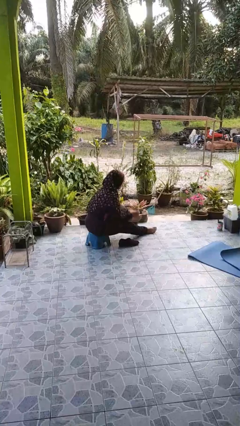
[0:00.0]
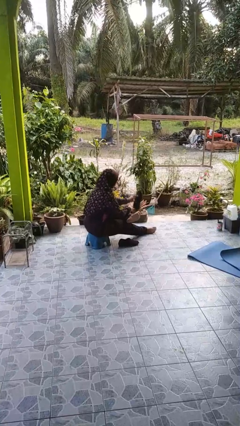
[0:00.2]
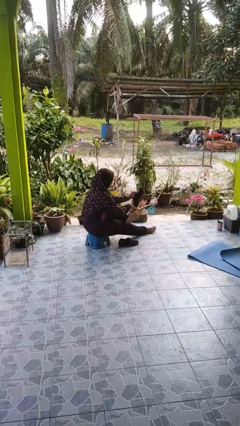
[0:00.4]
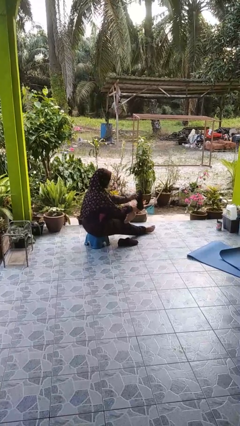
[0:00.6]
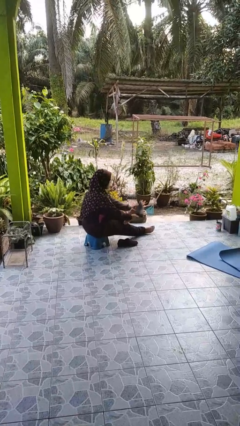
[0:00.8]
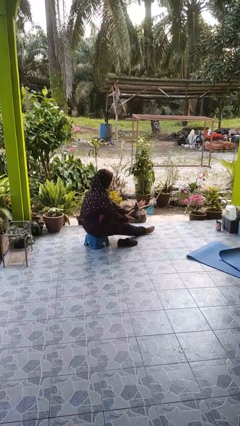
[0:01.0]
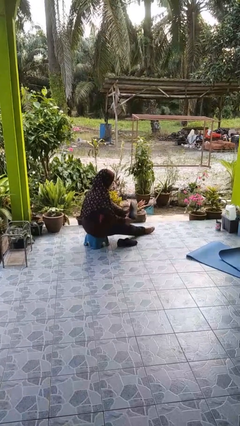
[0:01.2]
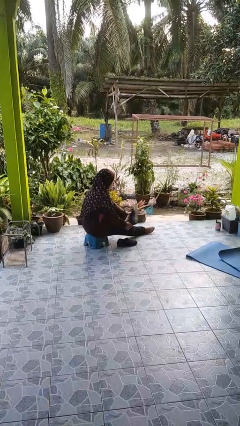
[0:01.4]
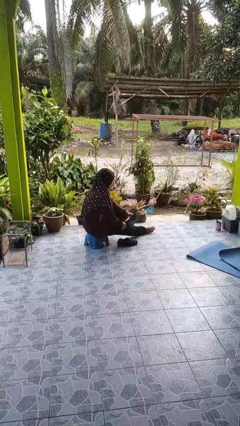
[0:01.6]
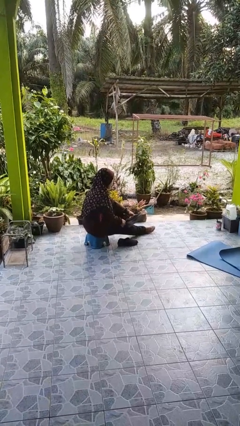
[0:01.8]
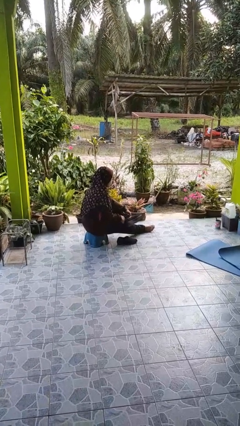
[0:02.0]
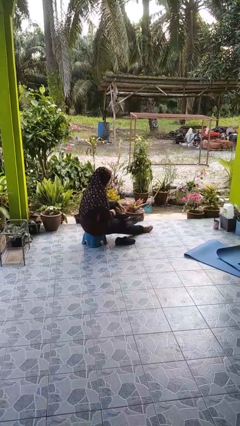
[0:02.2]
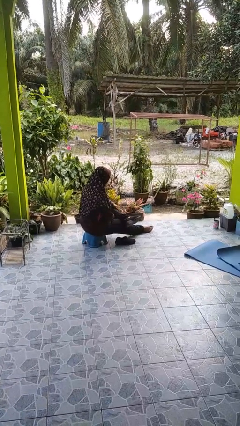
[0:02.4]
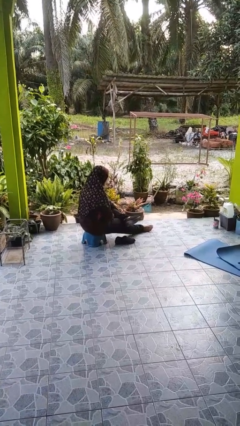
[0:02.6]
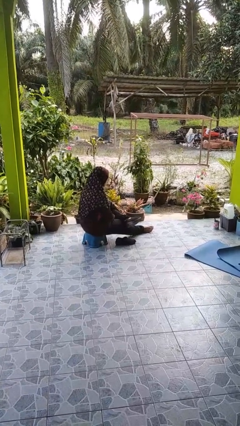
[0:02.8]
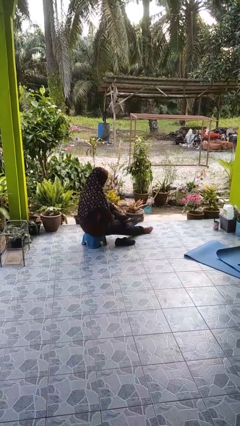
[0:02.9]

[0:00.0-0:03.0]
person puts on shoes

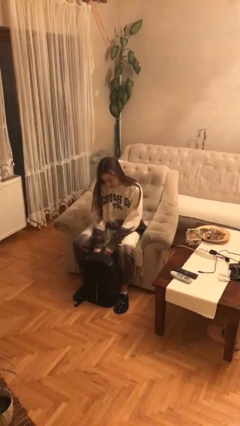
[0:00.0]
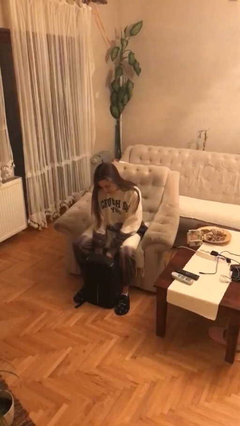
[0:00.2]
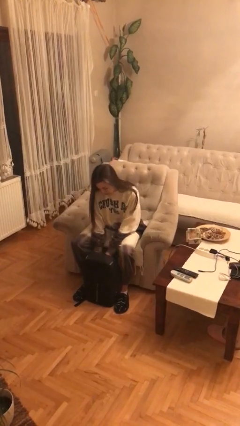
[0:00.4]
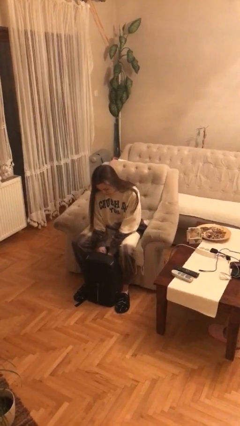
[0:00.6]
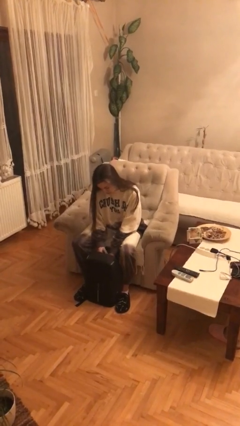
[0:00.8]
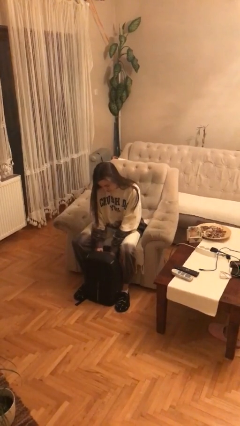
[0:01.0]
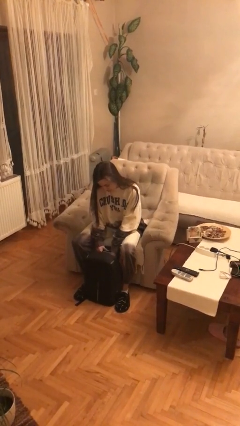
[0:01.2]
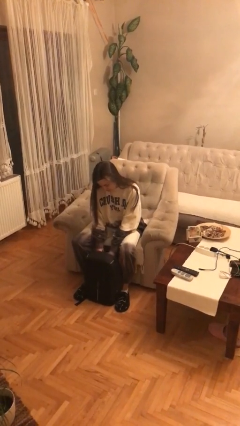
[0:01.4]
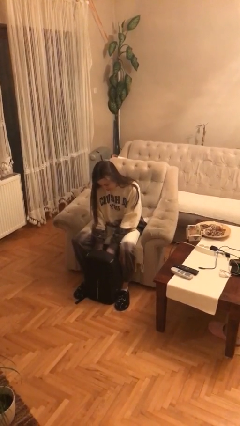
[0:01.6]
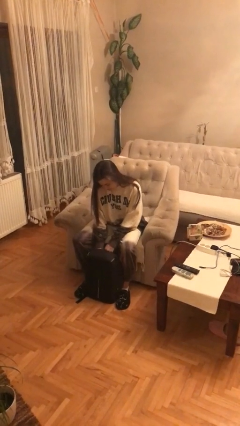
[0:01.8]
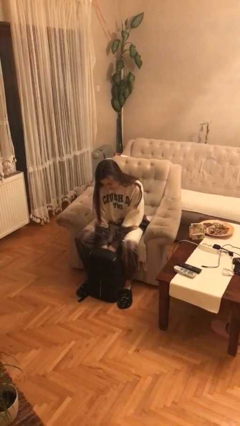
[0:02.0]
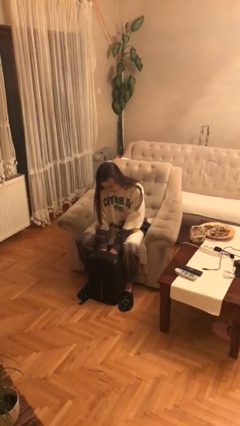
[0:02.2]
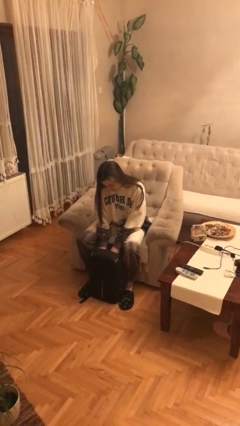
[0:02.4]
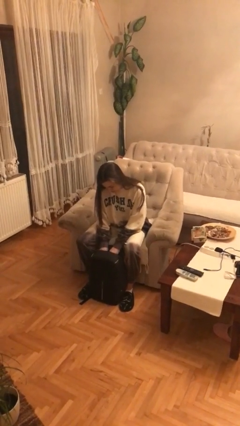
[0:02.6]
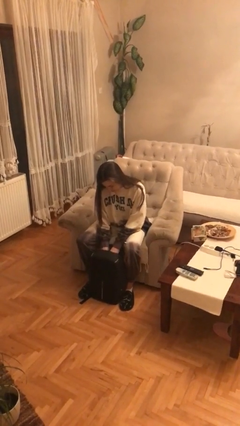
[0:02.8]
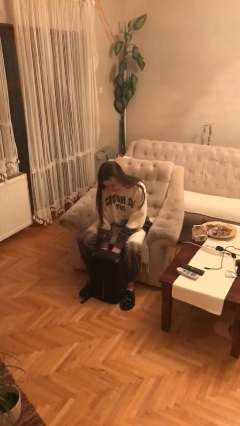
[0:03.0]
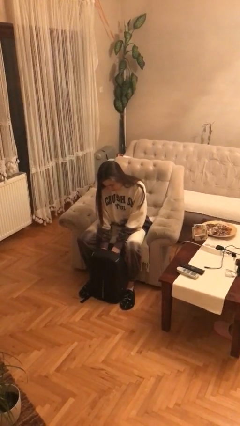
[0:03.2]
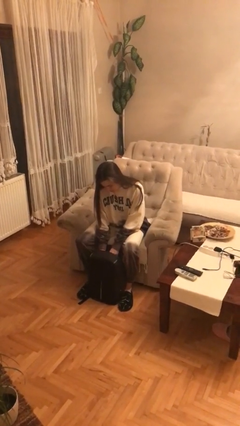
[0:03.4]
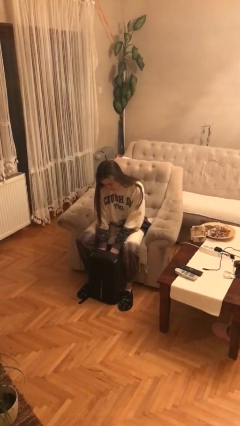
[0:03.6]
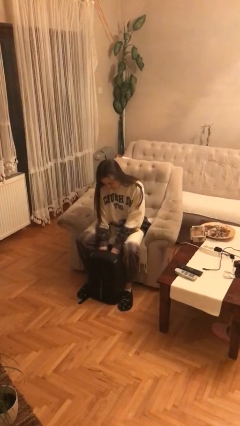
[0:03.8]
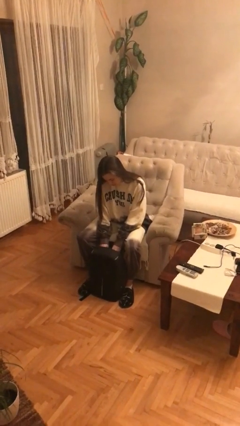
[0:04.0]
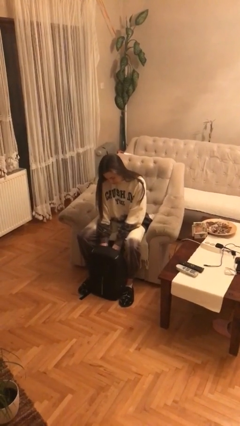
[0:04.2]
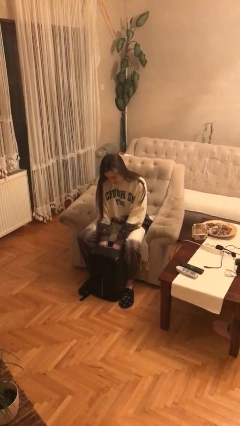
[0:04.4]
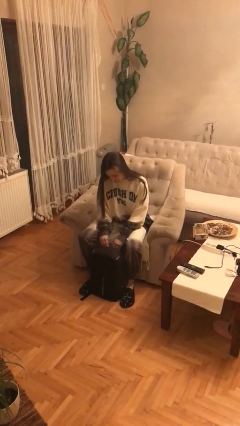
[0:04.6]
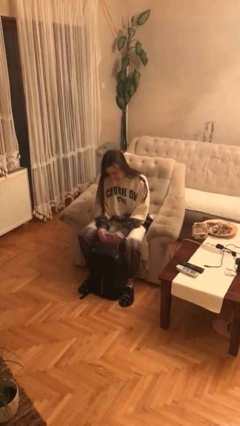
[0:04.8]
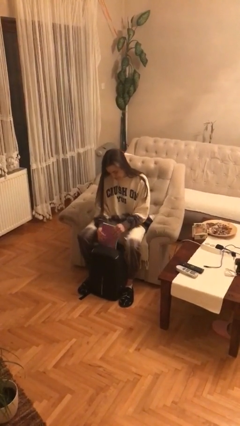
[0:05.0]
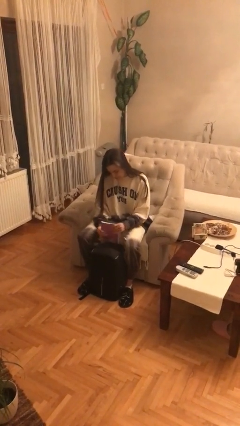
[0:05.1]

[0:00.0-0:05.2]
person searches in backpack

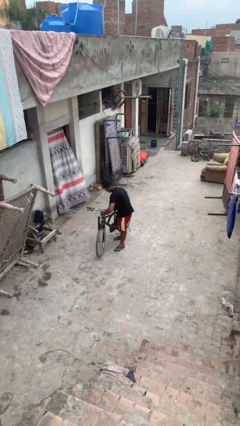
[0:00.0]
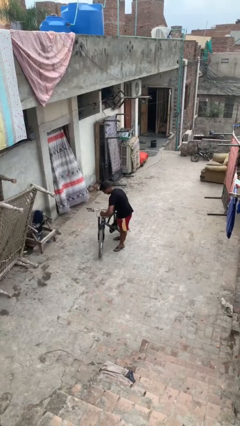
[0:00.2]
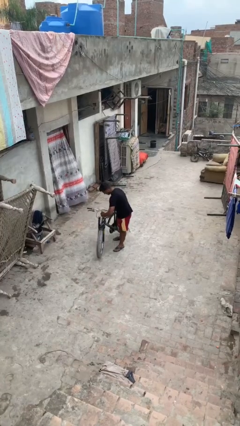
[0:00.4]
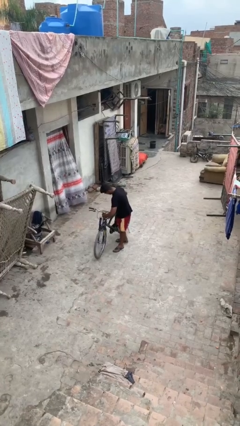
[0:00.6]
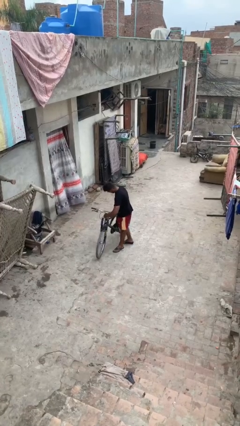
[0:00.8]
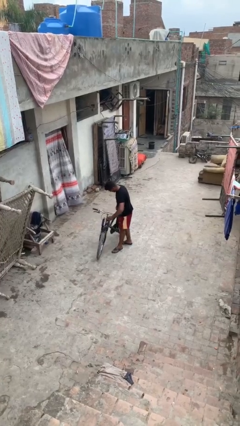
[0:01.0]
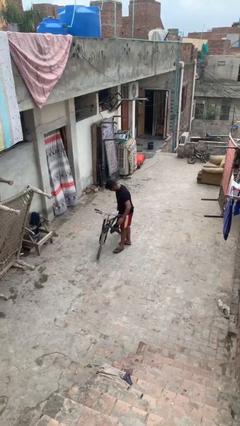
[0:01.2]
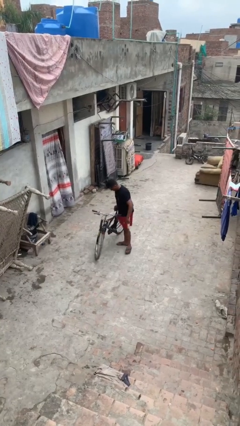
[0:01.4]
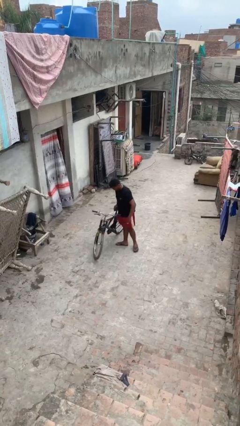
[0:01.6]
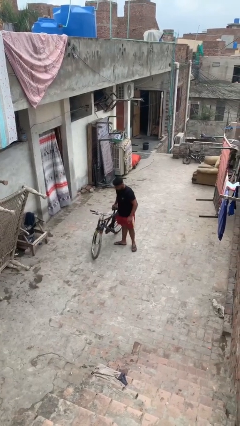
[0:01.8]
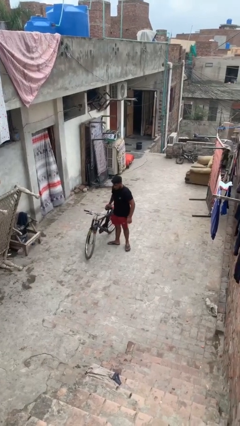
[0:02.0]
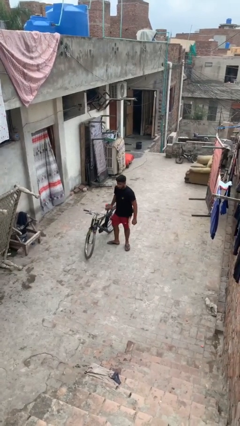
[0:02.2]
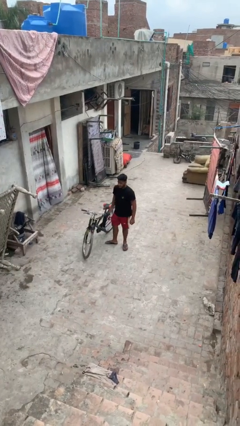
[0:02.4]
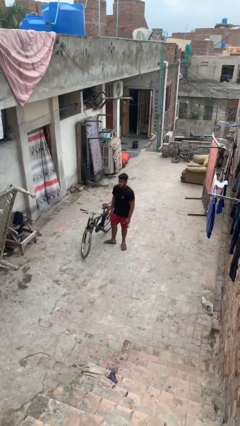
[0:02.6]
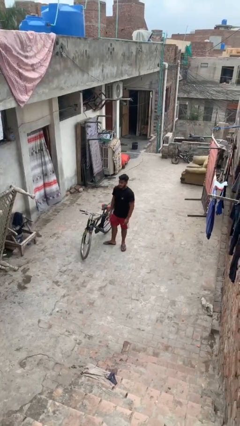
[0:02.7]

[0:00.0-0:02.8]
person puts down object on floor

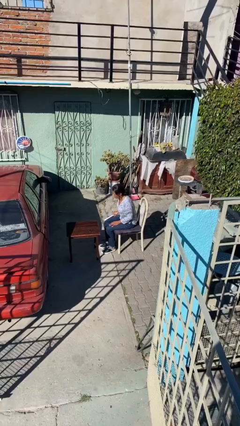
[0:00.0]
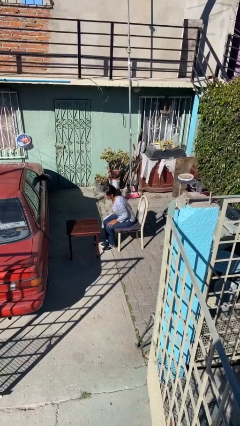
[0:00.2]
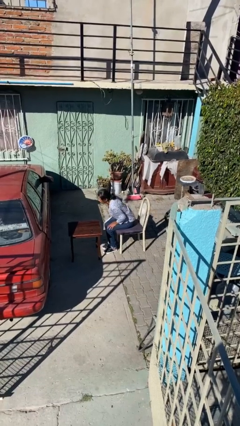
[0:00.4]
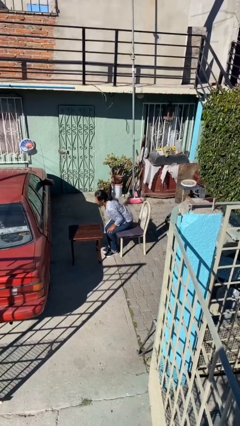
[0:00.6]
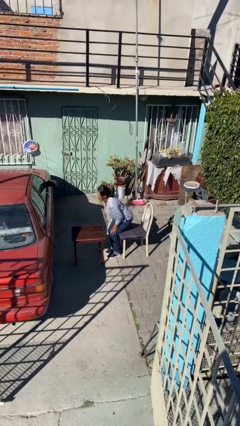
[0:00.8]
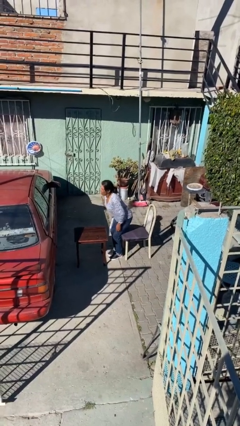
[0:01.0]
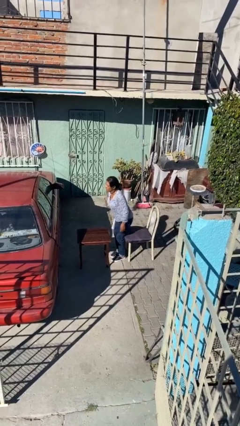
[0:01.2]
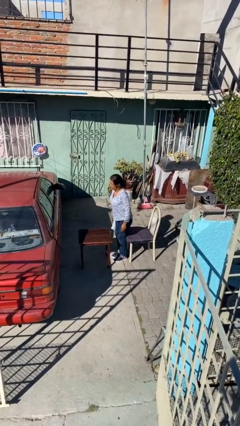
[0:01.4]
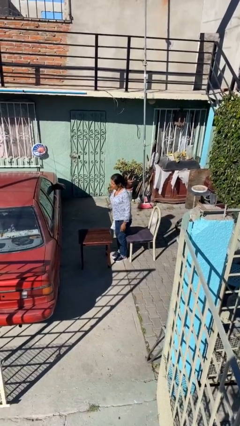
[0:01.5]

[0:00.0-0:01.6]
person stands up

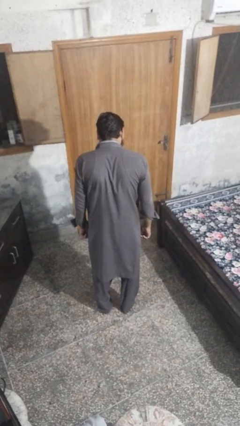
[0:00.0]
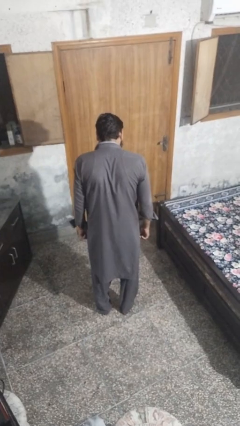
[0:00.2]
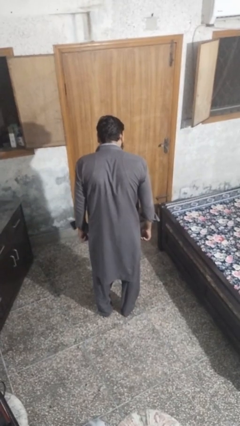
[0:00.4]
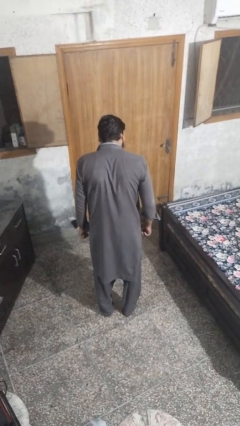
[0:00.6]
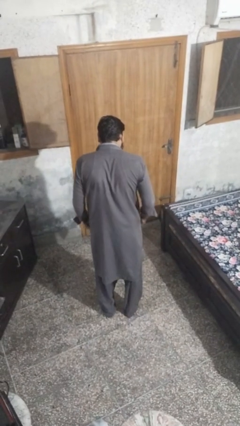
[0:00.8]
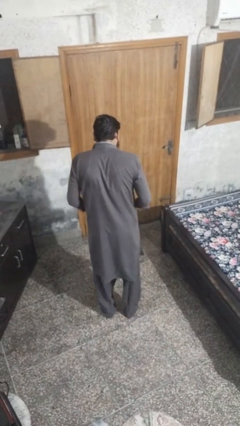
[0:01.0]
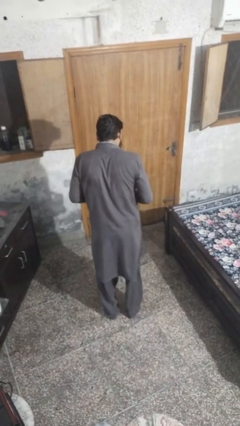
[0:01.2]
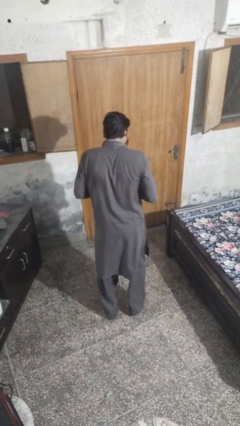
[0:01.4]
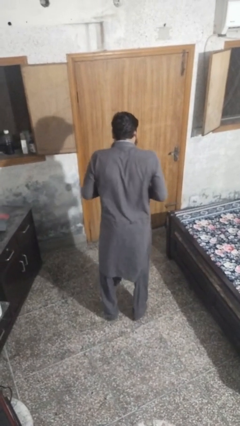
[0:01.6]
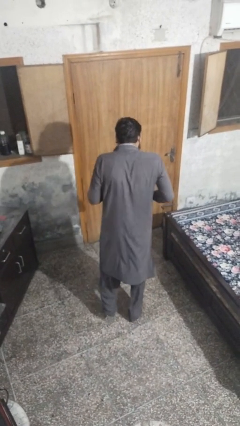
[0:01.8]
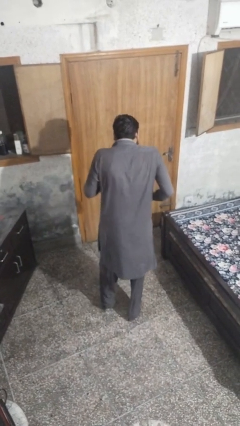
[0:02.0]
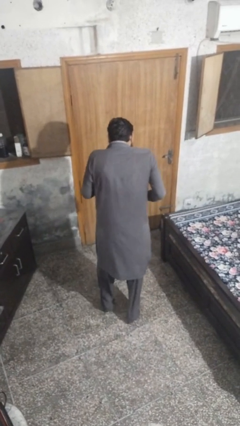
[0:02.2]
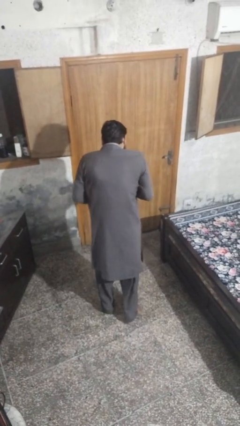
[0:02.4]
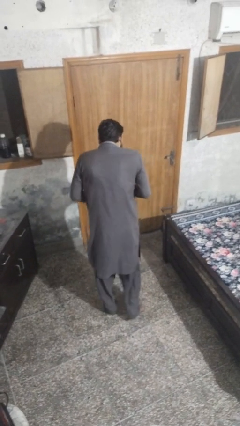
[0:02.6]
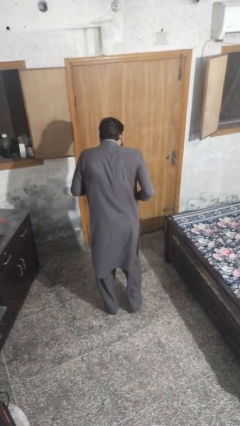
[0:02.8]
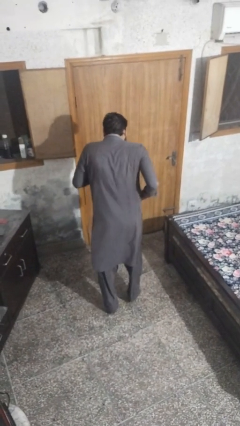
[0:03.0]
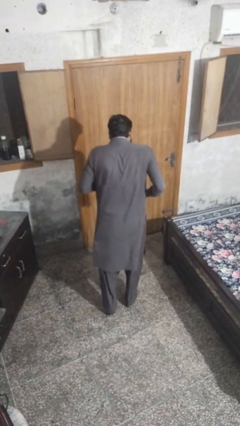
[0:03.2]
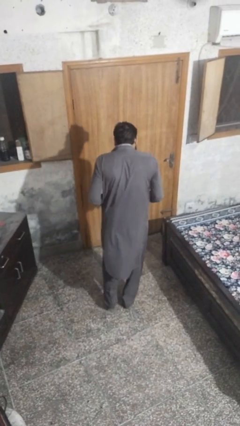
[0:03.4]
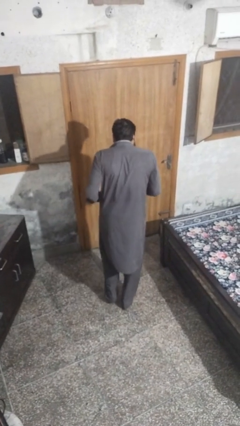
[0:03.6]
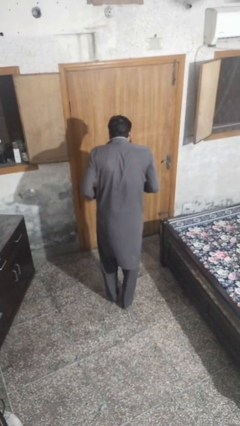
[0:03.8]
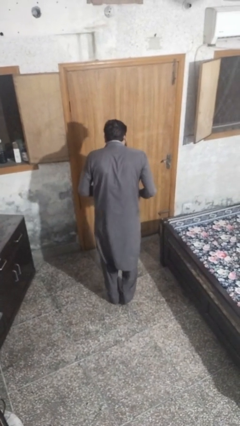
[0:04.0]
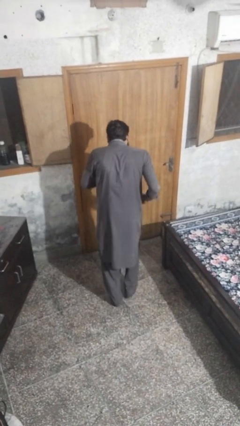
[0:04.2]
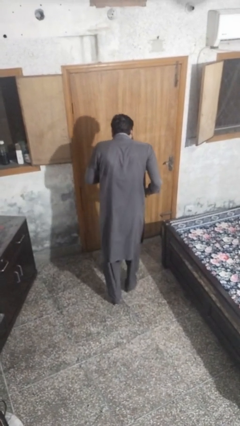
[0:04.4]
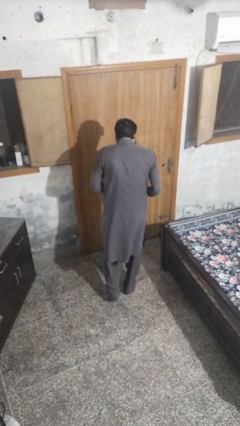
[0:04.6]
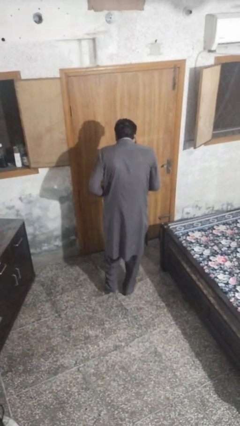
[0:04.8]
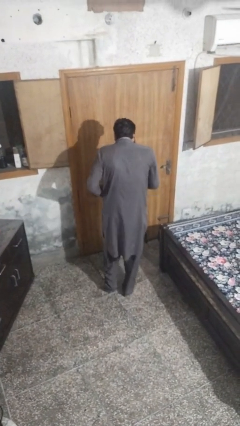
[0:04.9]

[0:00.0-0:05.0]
person walks tiptoe
